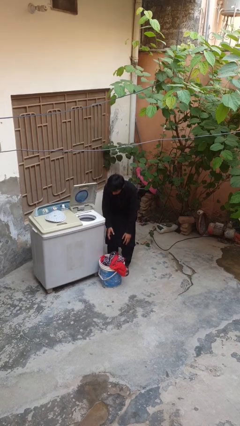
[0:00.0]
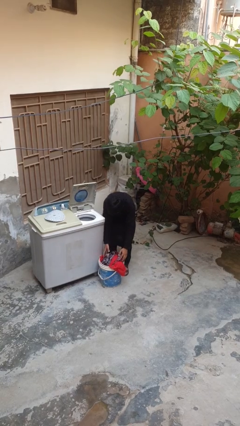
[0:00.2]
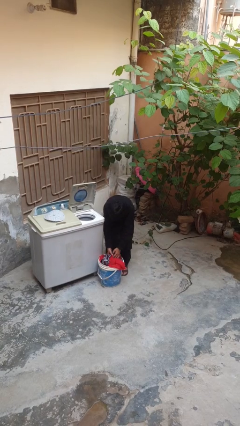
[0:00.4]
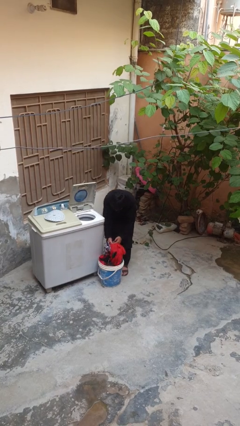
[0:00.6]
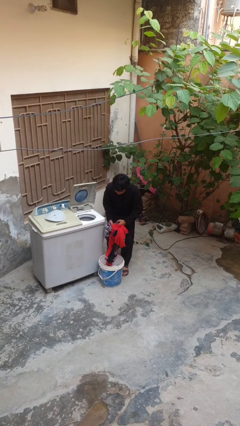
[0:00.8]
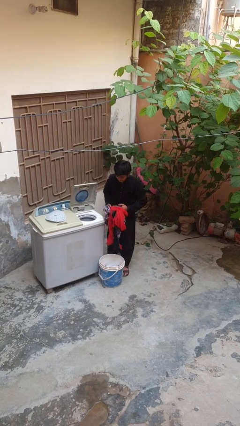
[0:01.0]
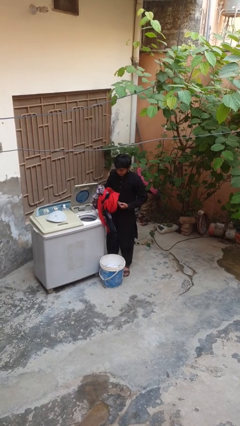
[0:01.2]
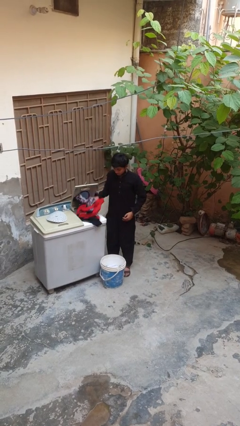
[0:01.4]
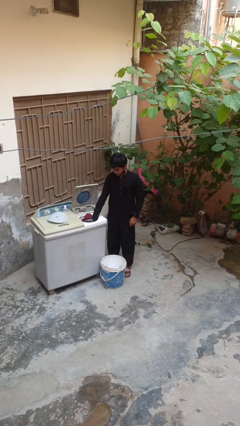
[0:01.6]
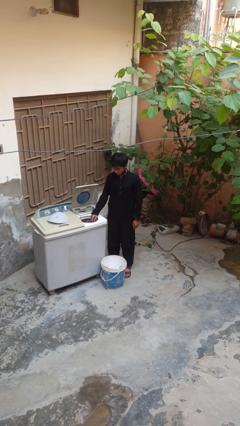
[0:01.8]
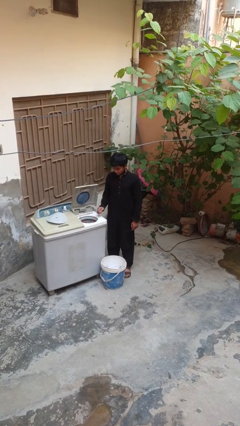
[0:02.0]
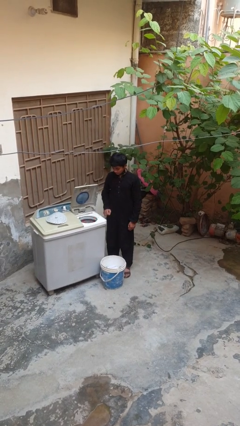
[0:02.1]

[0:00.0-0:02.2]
person loads dryer

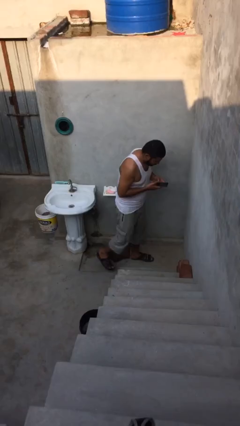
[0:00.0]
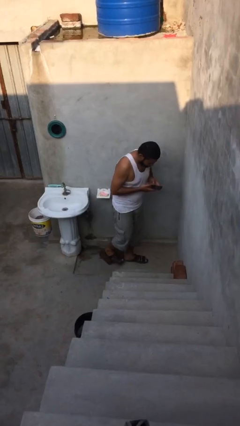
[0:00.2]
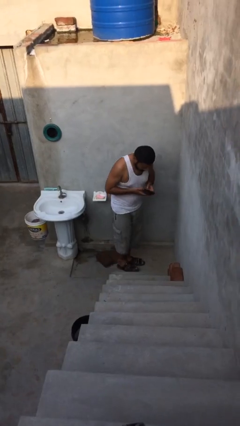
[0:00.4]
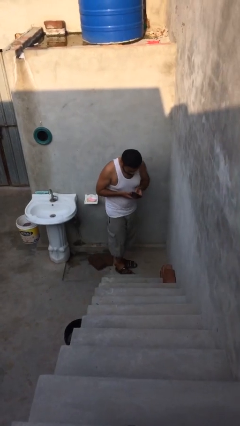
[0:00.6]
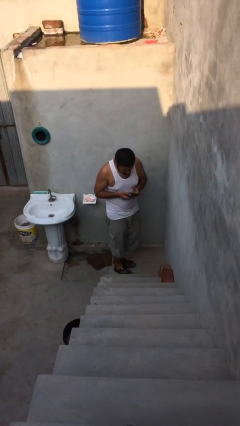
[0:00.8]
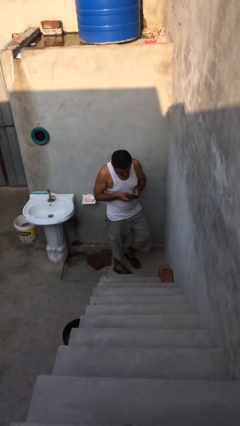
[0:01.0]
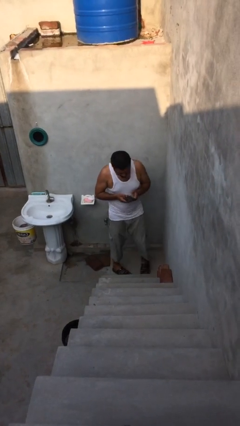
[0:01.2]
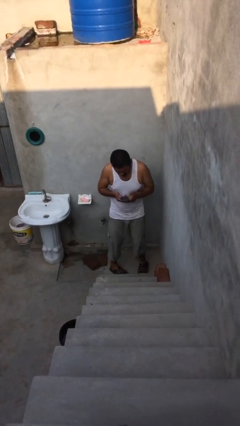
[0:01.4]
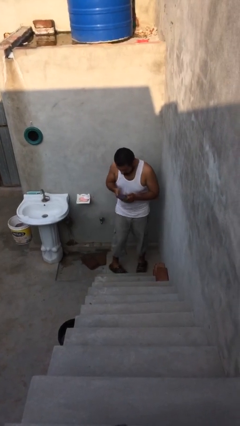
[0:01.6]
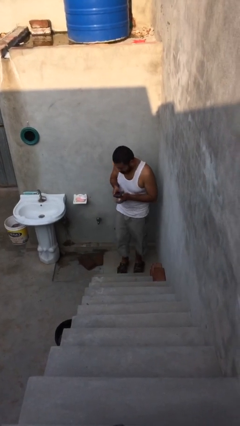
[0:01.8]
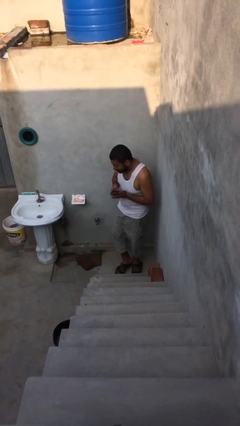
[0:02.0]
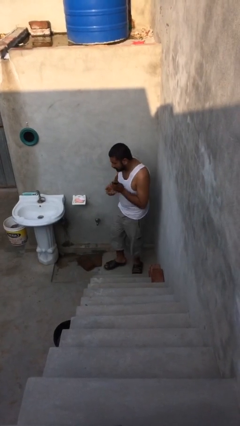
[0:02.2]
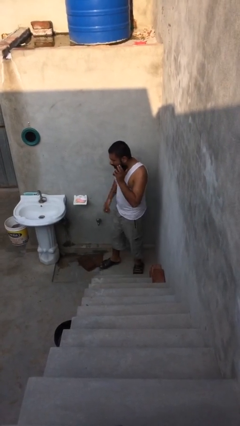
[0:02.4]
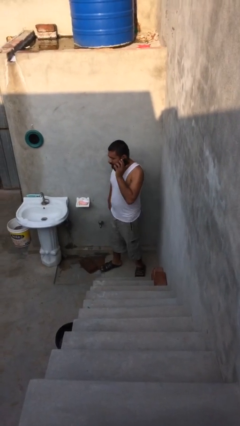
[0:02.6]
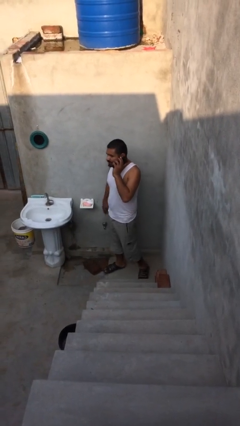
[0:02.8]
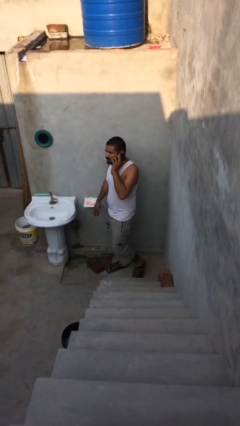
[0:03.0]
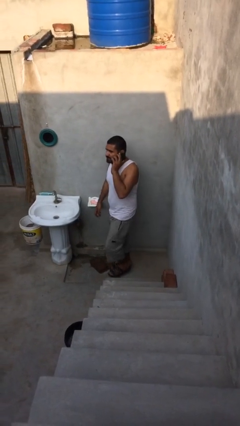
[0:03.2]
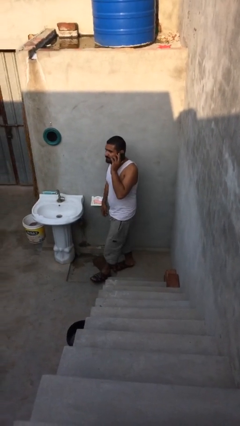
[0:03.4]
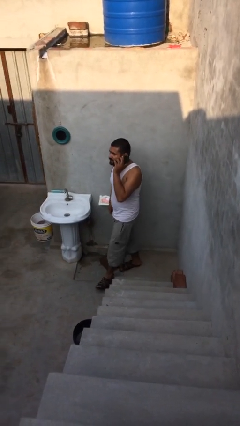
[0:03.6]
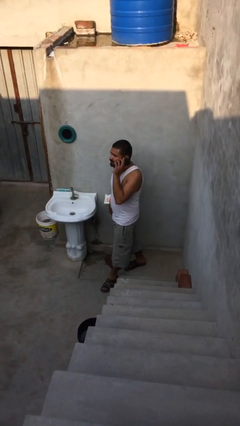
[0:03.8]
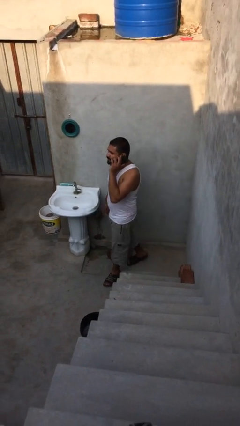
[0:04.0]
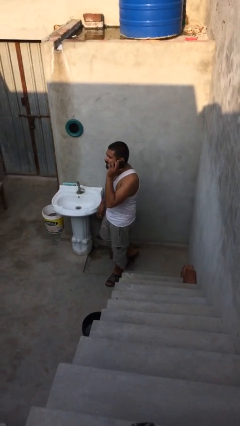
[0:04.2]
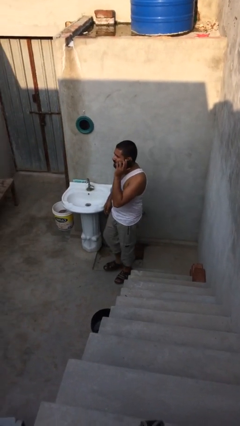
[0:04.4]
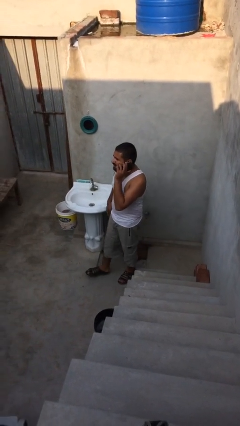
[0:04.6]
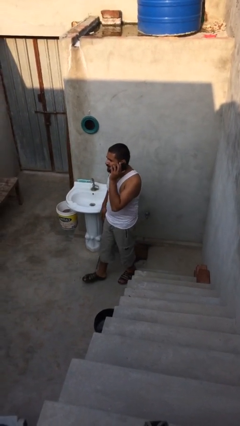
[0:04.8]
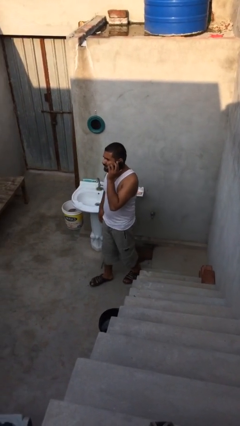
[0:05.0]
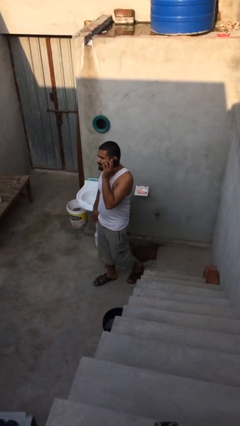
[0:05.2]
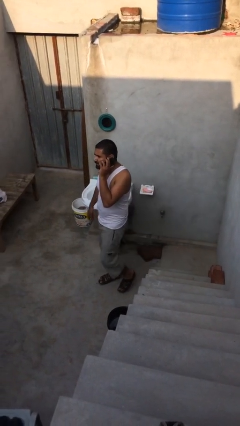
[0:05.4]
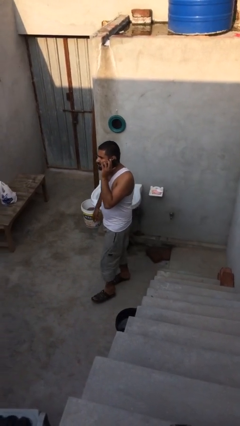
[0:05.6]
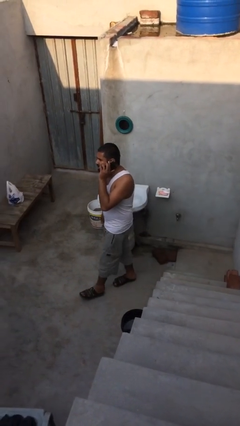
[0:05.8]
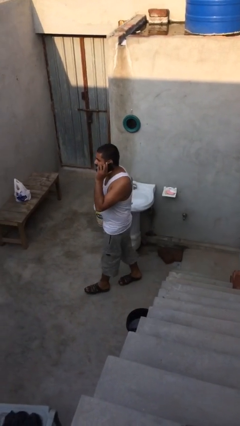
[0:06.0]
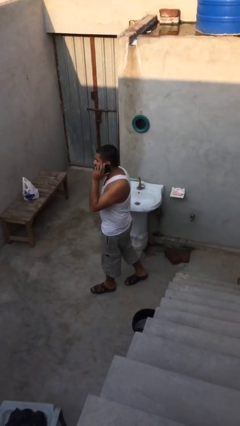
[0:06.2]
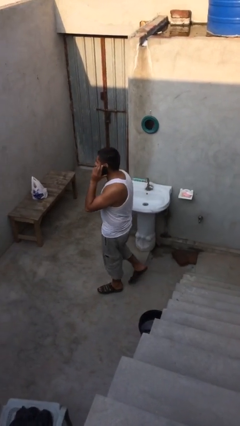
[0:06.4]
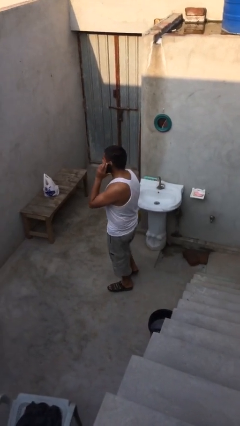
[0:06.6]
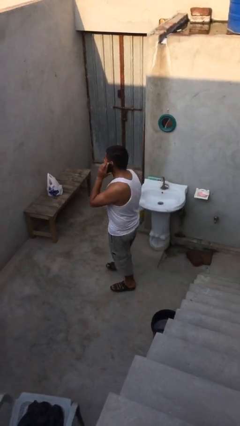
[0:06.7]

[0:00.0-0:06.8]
person talks on phone

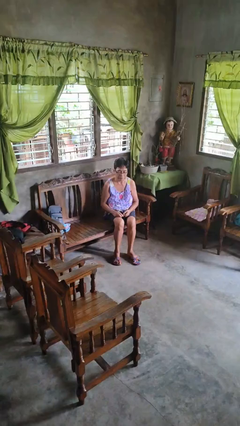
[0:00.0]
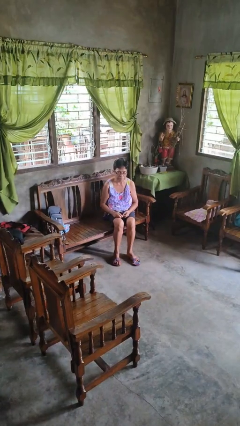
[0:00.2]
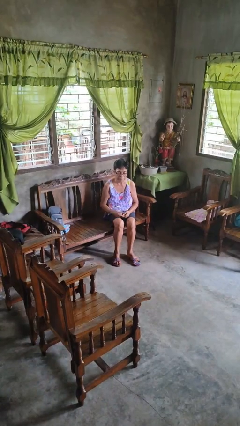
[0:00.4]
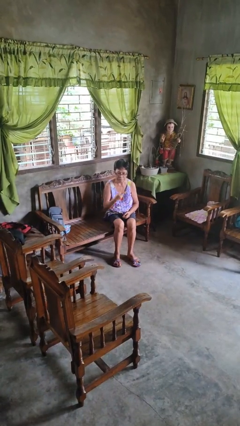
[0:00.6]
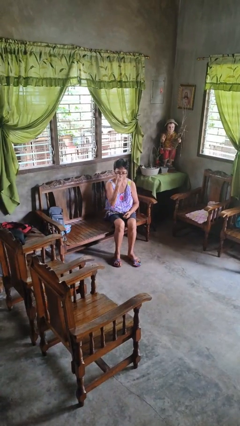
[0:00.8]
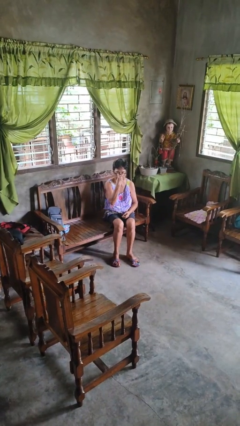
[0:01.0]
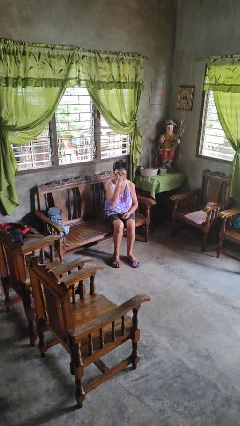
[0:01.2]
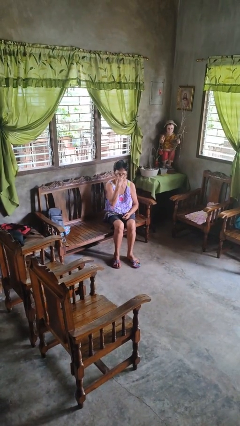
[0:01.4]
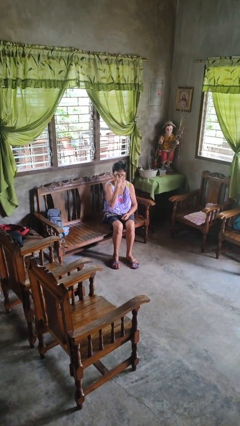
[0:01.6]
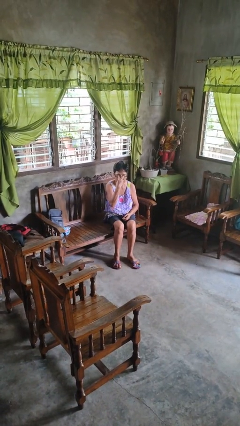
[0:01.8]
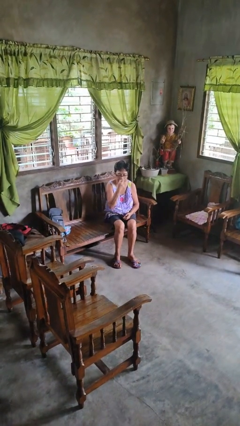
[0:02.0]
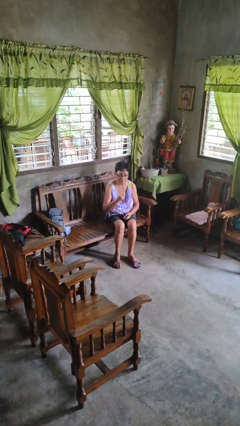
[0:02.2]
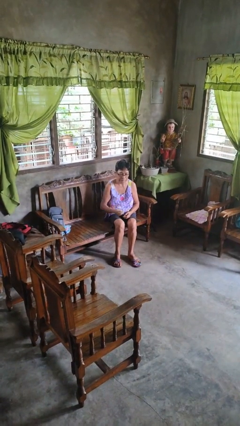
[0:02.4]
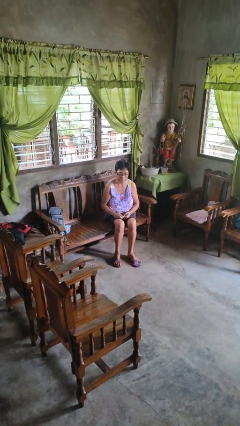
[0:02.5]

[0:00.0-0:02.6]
person gestures watch closely

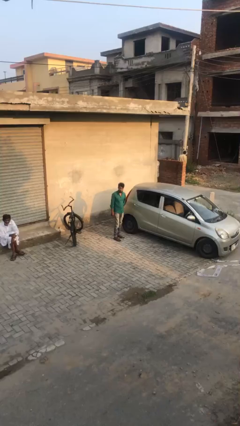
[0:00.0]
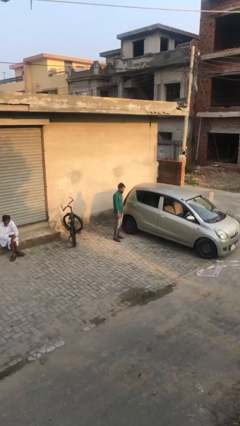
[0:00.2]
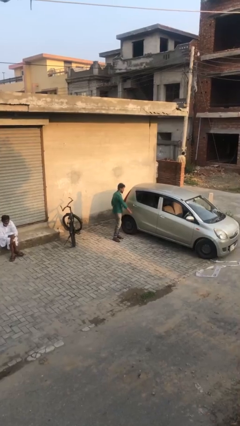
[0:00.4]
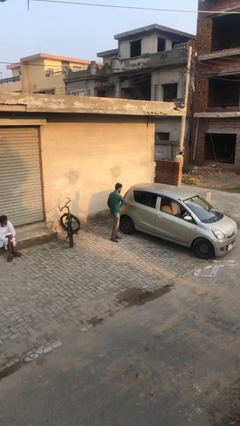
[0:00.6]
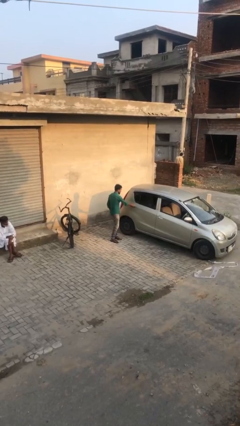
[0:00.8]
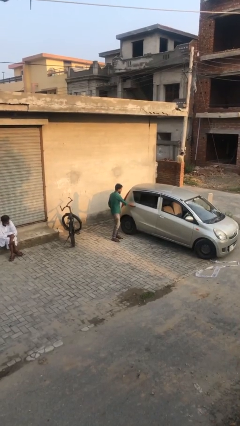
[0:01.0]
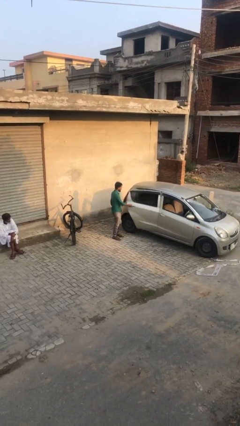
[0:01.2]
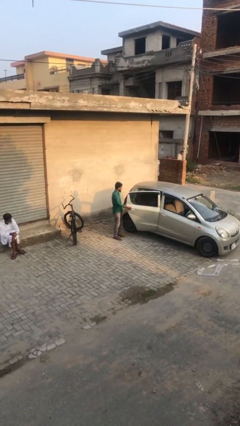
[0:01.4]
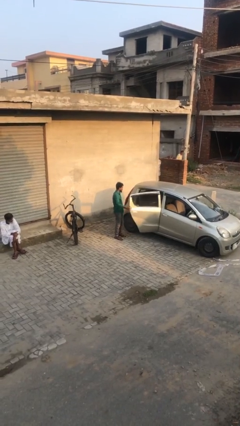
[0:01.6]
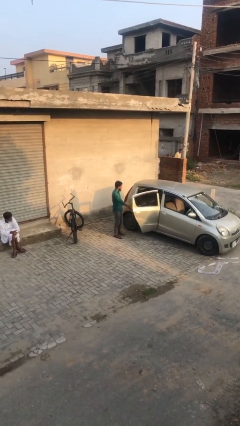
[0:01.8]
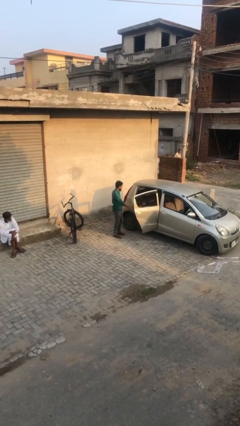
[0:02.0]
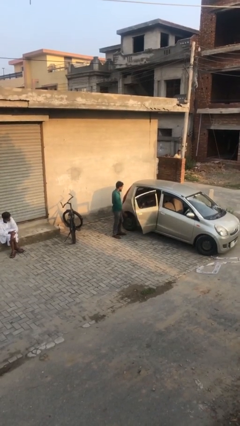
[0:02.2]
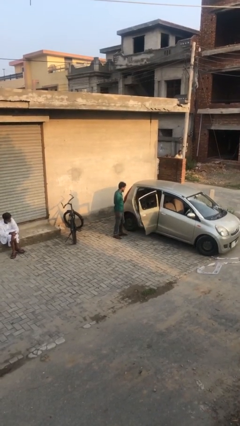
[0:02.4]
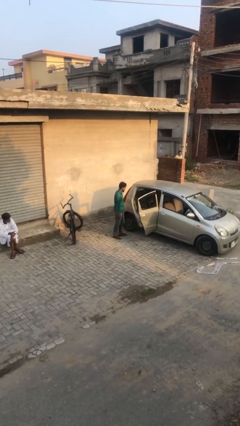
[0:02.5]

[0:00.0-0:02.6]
person opens car door

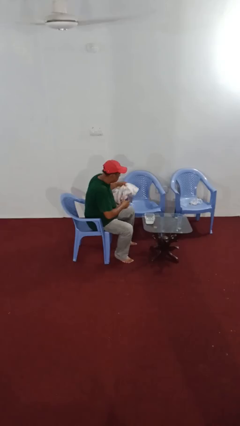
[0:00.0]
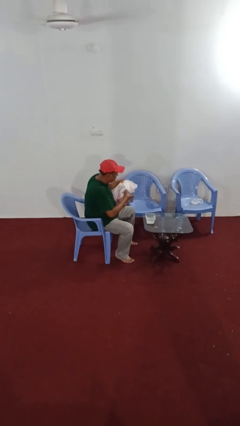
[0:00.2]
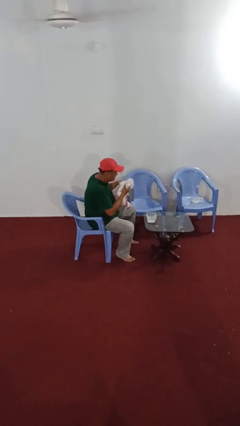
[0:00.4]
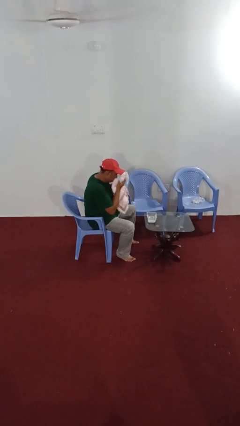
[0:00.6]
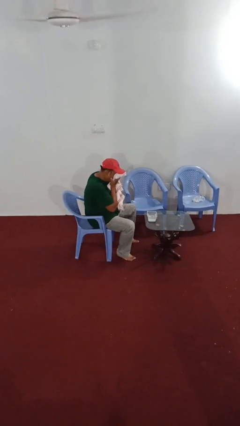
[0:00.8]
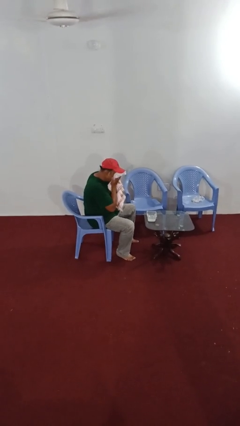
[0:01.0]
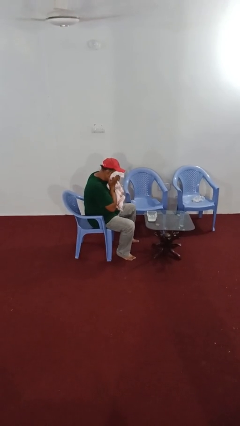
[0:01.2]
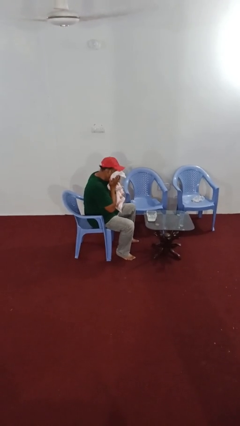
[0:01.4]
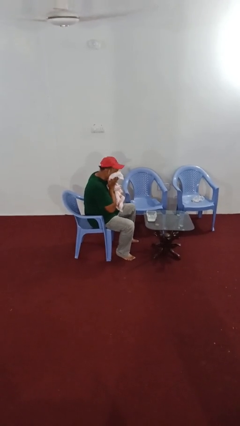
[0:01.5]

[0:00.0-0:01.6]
person dries face with towel

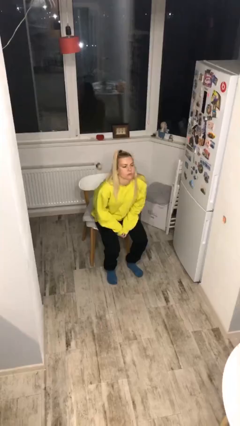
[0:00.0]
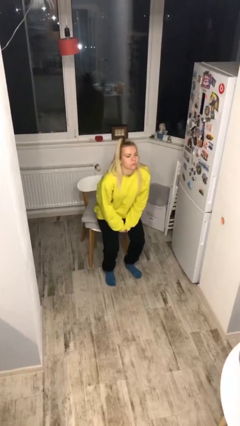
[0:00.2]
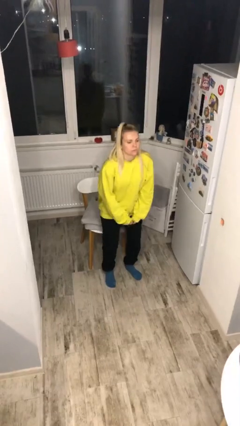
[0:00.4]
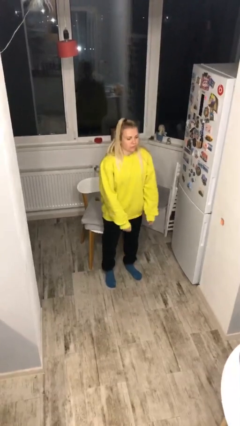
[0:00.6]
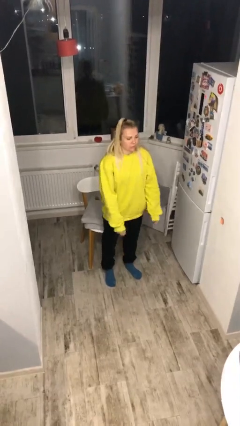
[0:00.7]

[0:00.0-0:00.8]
person stands up

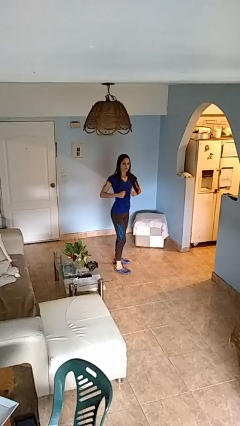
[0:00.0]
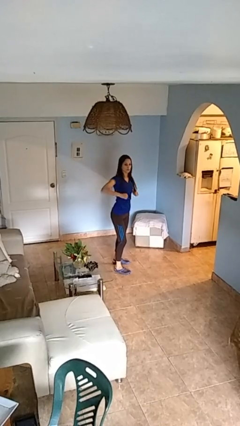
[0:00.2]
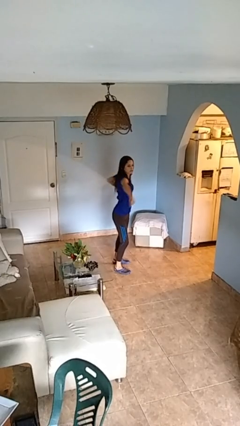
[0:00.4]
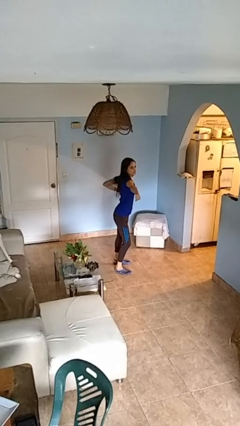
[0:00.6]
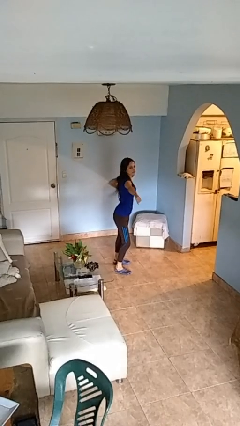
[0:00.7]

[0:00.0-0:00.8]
person karate chop
